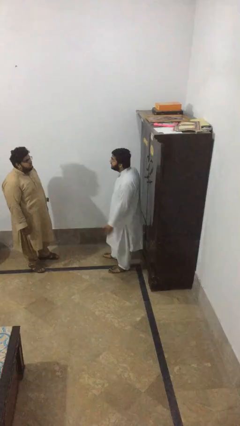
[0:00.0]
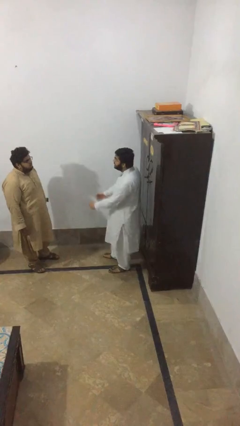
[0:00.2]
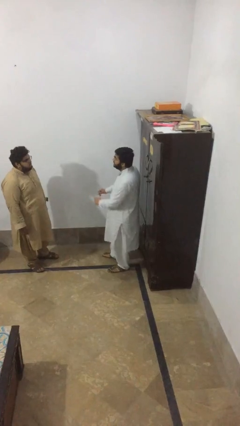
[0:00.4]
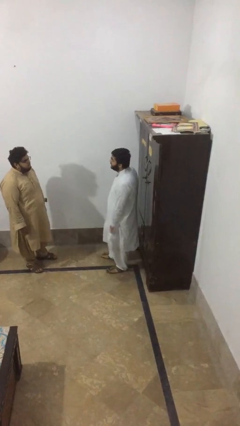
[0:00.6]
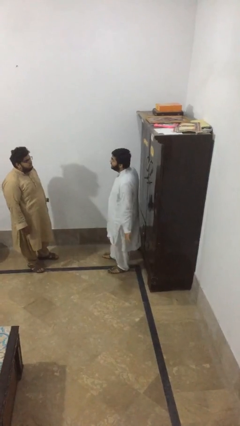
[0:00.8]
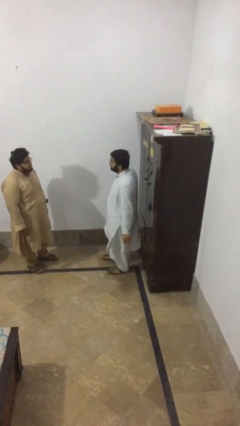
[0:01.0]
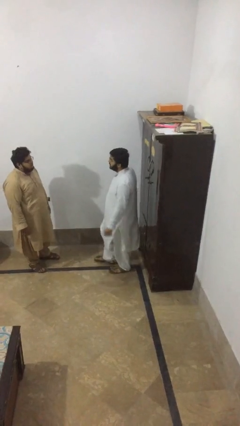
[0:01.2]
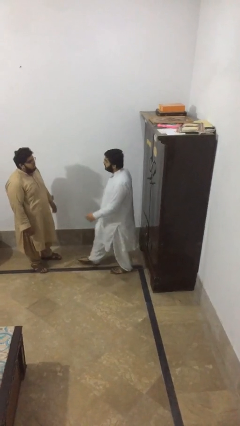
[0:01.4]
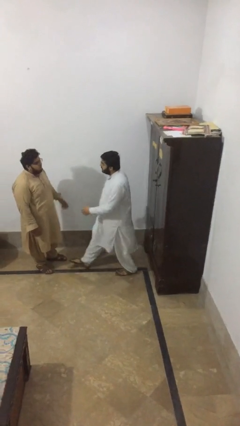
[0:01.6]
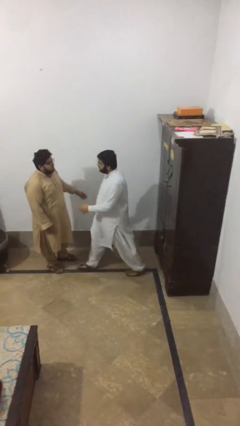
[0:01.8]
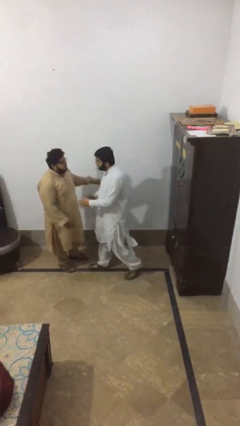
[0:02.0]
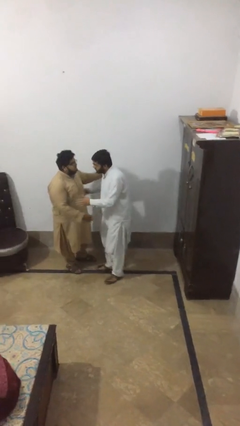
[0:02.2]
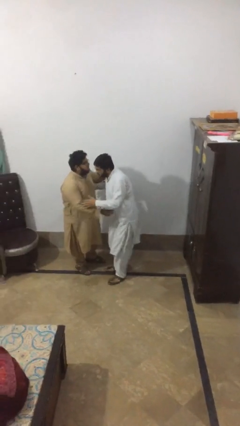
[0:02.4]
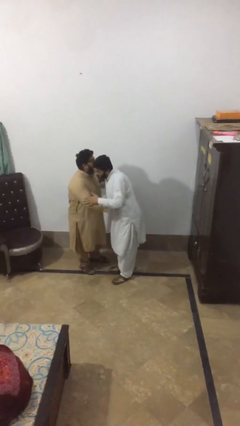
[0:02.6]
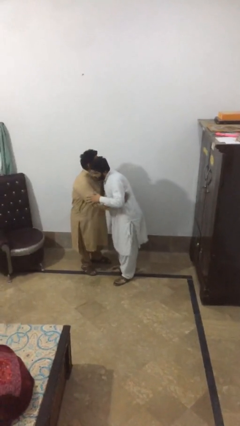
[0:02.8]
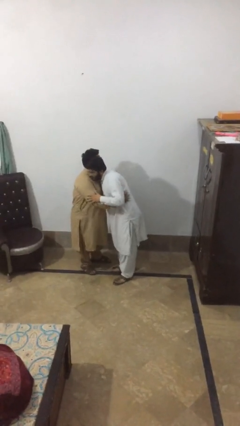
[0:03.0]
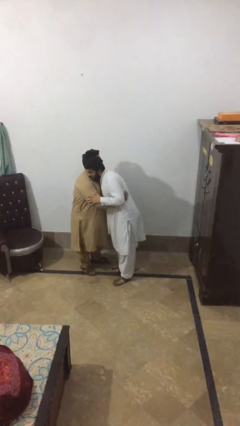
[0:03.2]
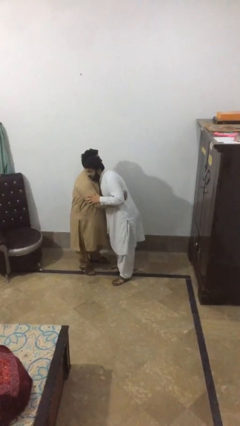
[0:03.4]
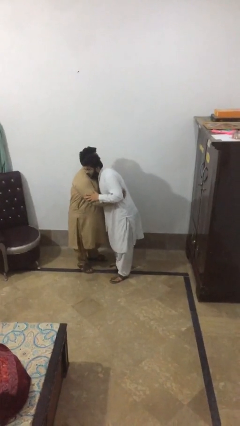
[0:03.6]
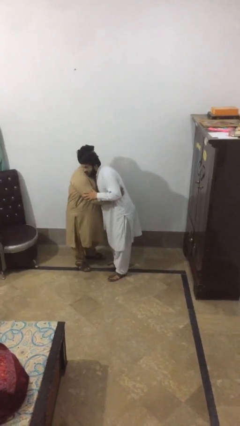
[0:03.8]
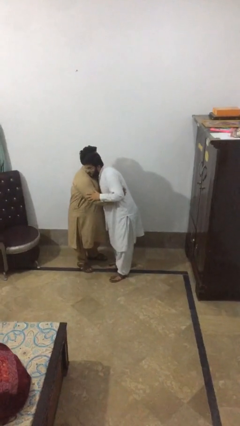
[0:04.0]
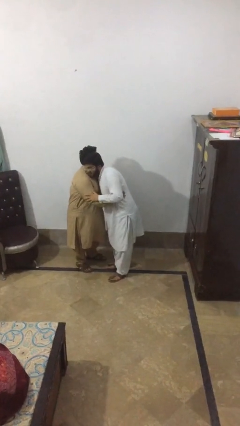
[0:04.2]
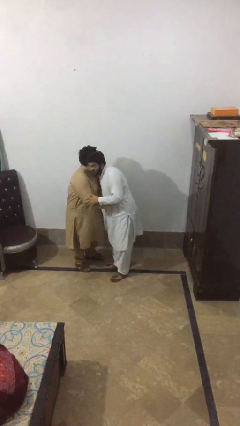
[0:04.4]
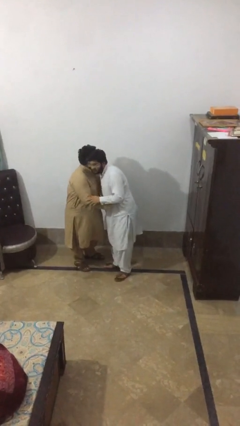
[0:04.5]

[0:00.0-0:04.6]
person embraces person

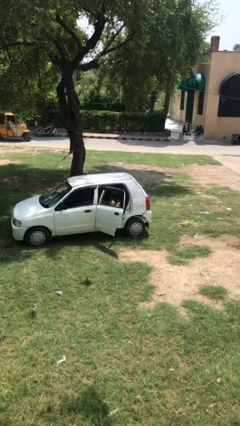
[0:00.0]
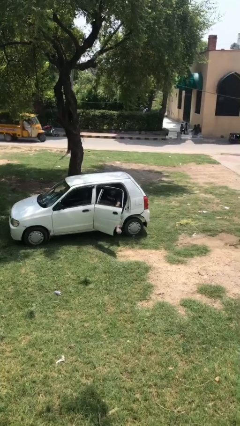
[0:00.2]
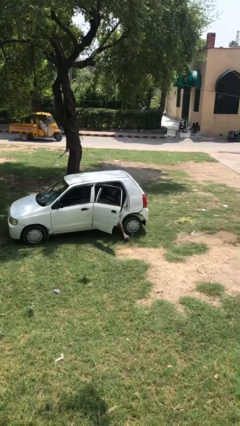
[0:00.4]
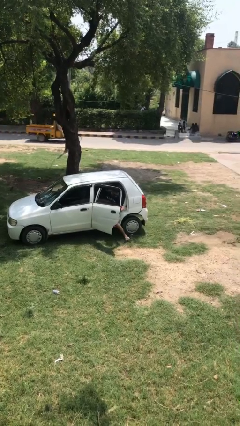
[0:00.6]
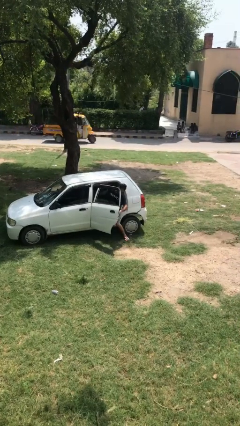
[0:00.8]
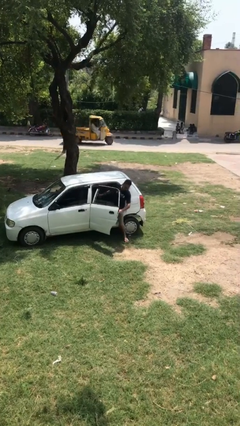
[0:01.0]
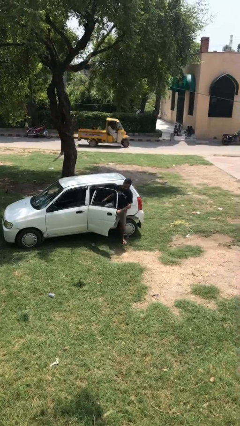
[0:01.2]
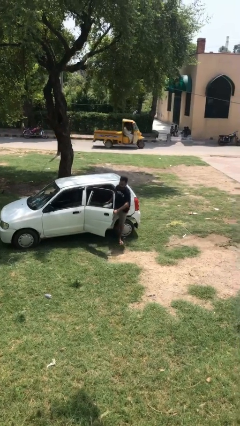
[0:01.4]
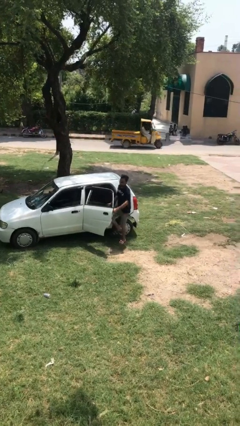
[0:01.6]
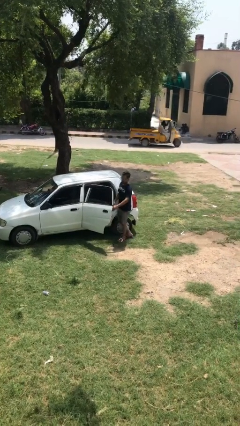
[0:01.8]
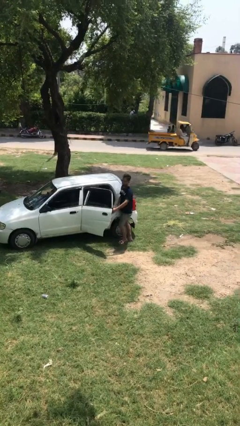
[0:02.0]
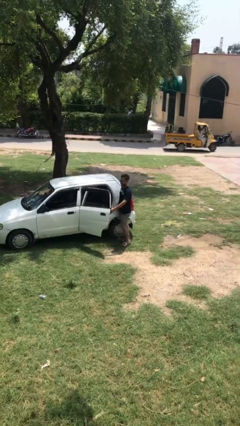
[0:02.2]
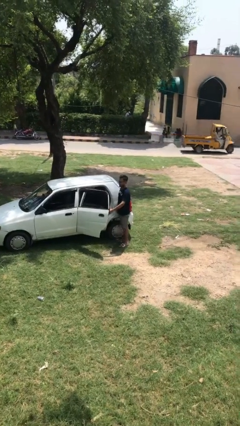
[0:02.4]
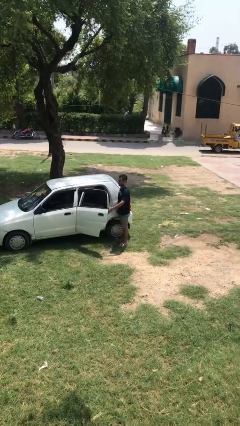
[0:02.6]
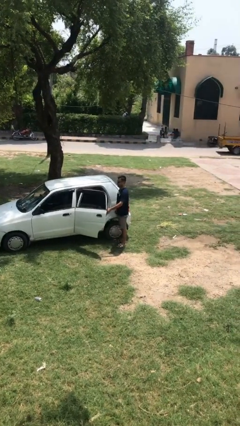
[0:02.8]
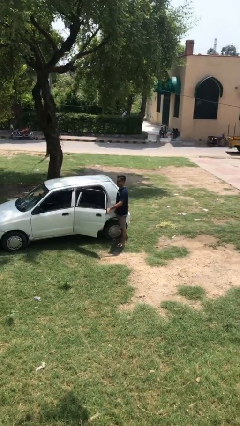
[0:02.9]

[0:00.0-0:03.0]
person exits car

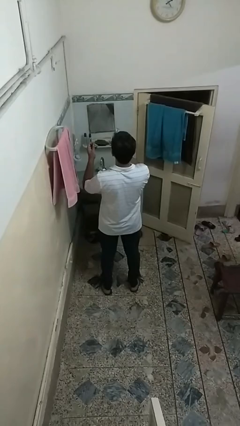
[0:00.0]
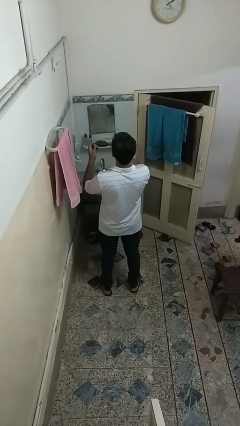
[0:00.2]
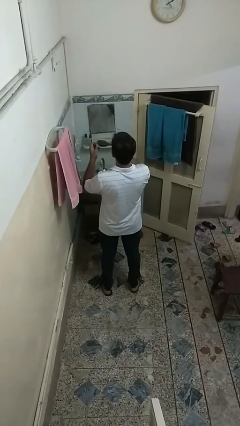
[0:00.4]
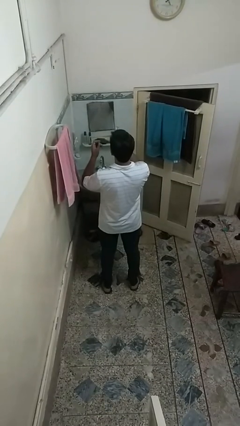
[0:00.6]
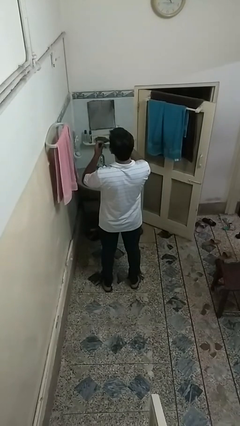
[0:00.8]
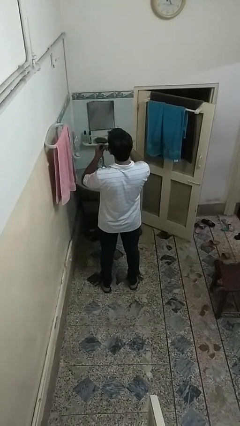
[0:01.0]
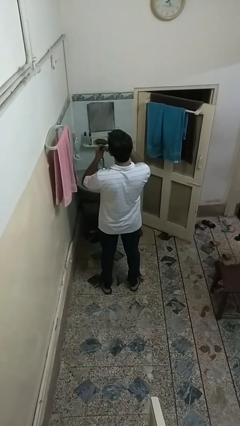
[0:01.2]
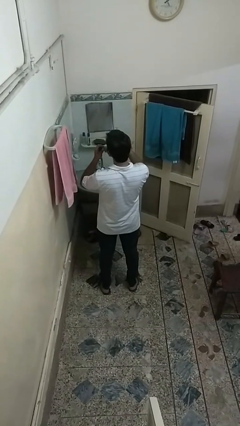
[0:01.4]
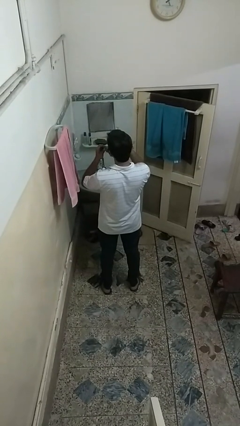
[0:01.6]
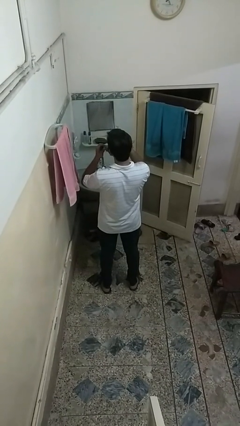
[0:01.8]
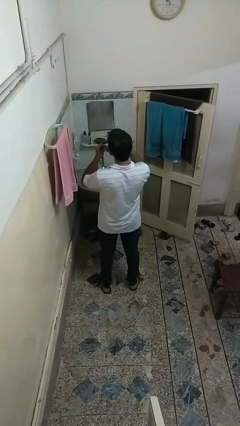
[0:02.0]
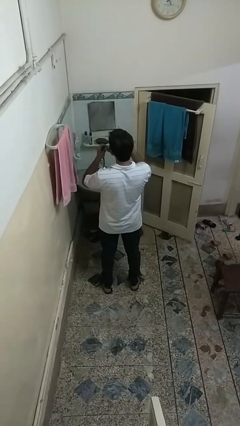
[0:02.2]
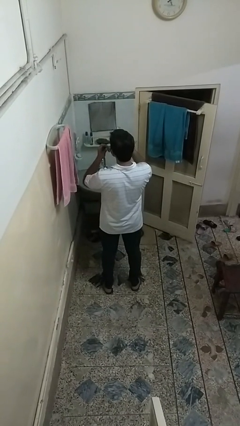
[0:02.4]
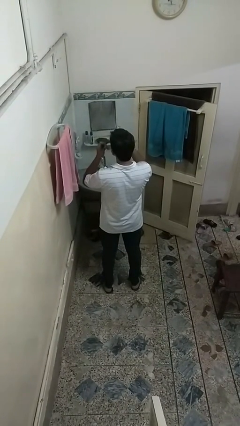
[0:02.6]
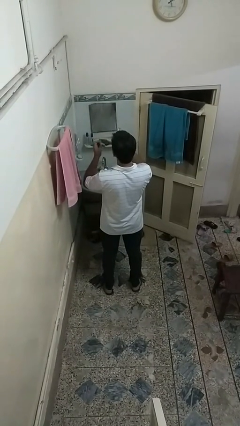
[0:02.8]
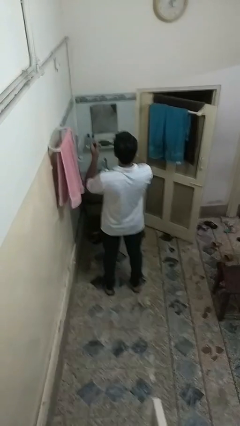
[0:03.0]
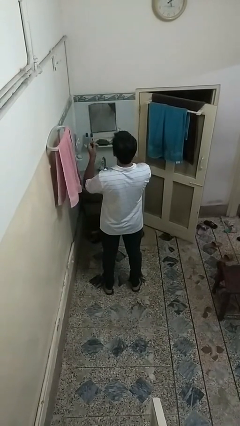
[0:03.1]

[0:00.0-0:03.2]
person flosses

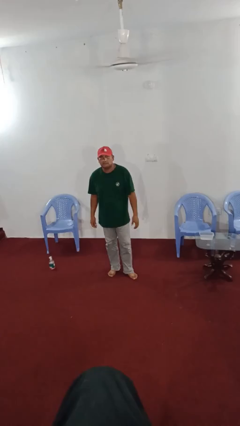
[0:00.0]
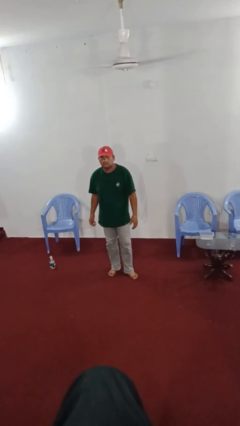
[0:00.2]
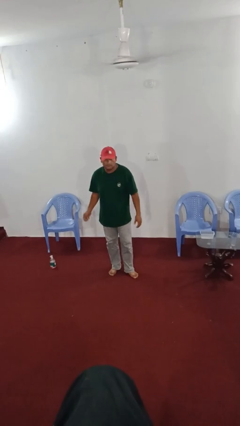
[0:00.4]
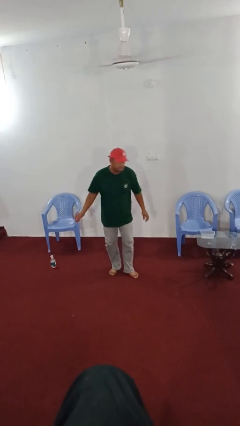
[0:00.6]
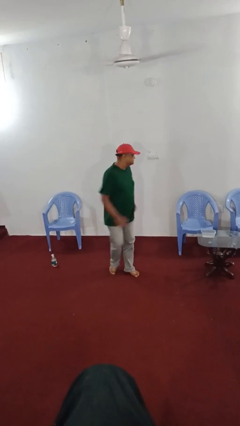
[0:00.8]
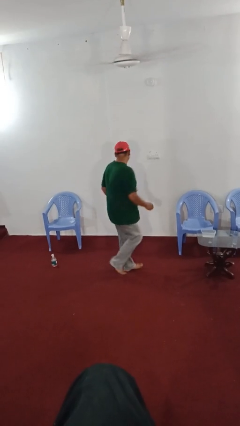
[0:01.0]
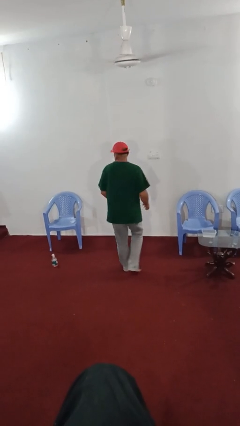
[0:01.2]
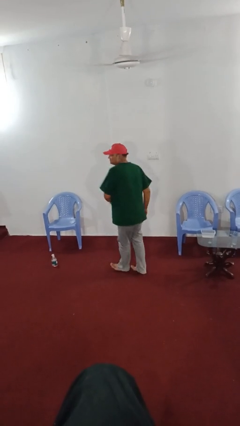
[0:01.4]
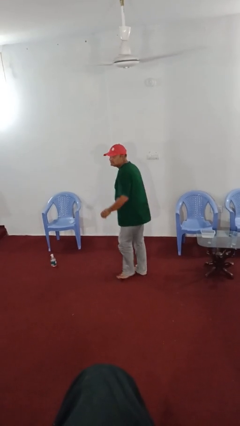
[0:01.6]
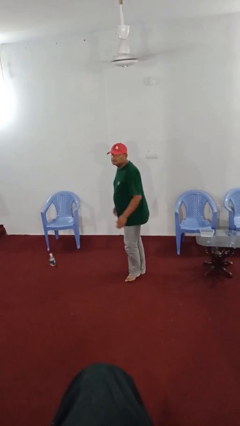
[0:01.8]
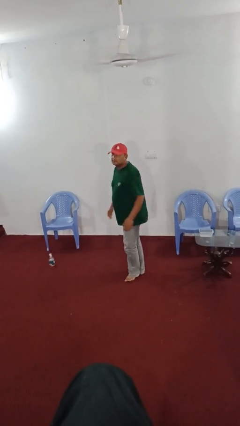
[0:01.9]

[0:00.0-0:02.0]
person twirls

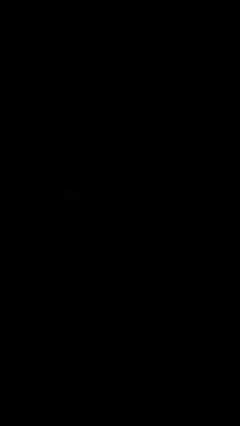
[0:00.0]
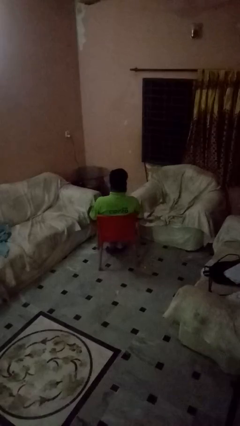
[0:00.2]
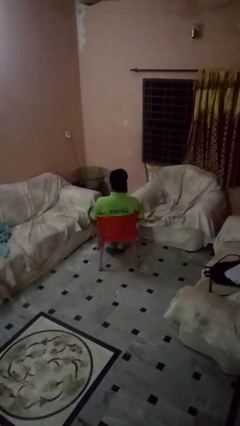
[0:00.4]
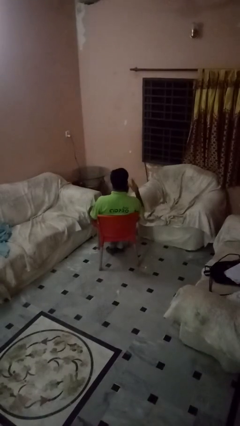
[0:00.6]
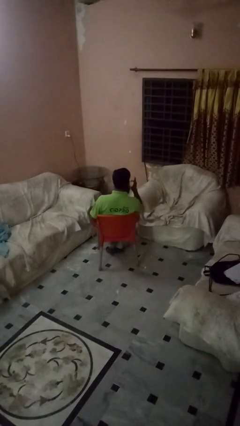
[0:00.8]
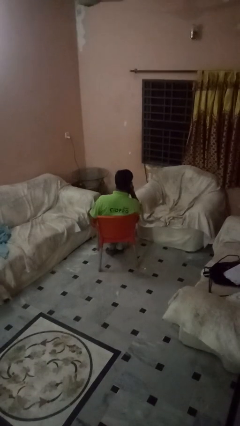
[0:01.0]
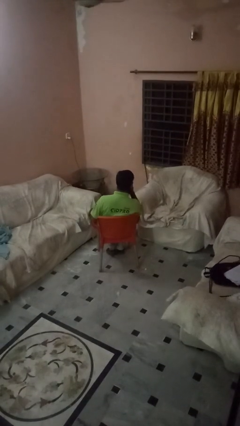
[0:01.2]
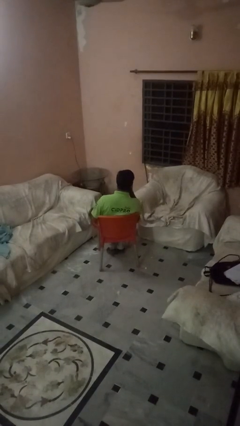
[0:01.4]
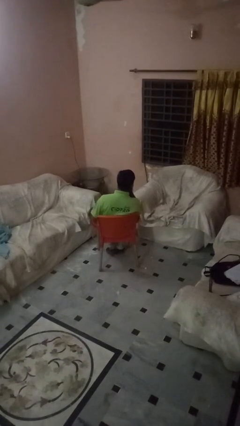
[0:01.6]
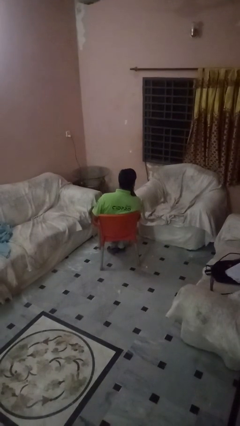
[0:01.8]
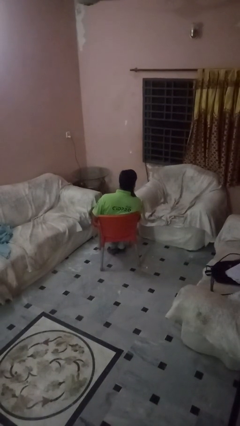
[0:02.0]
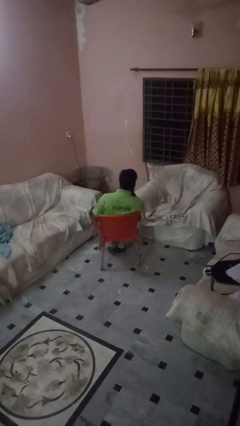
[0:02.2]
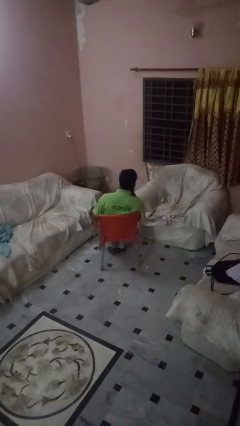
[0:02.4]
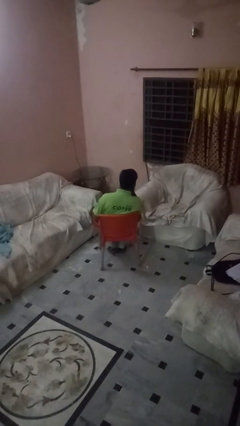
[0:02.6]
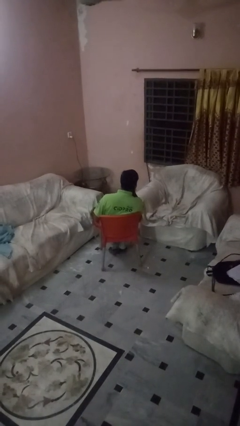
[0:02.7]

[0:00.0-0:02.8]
person strokes chin

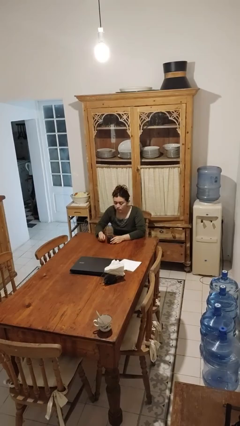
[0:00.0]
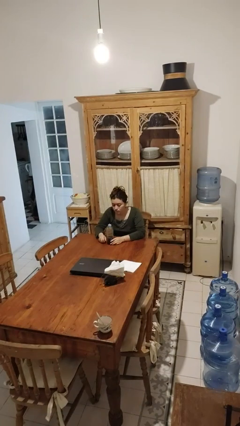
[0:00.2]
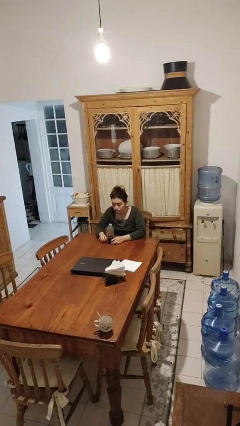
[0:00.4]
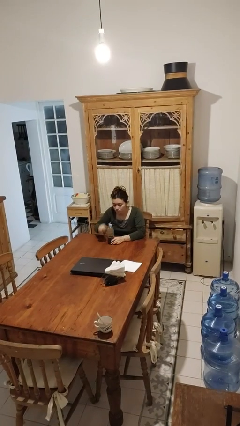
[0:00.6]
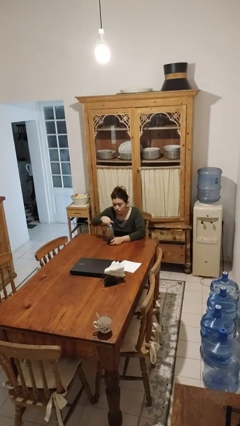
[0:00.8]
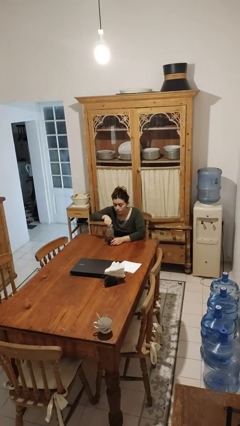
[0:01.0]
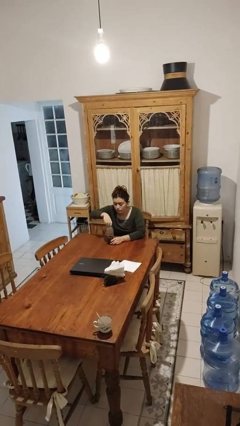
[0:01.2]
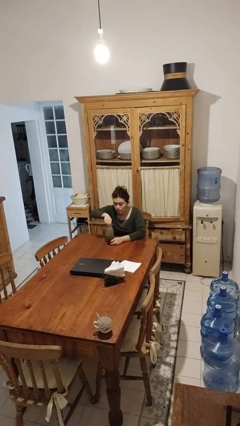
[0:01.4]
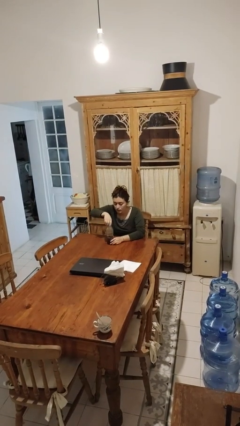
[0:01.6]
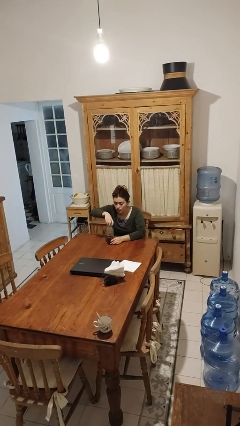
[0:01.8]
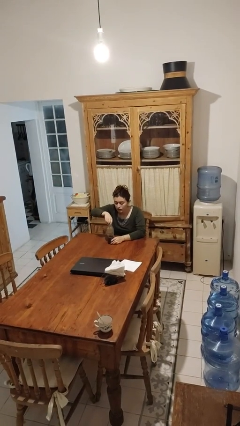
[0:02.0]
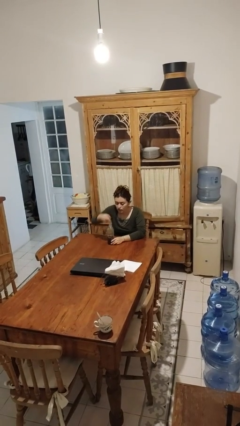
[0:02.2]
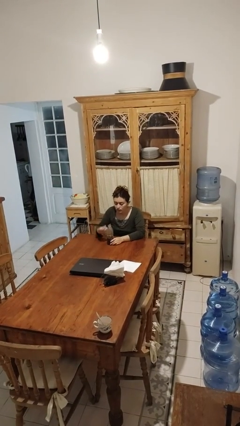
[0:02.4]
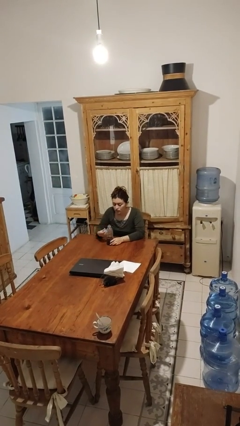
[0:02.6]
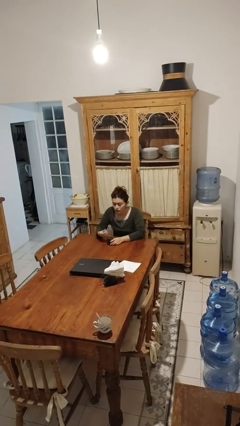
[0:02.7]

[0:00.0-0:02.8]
person unscrews lid from bottle
